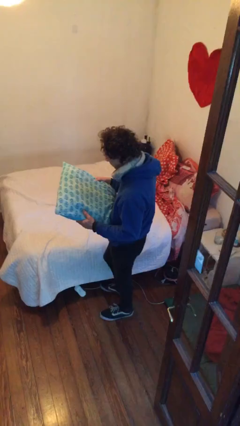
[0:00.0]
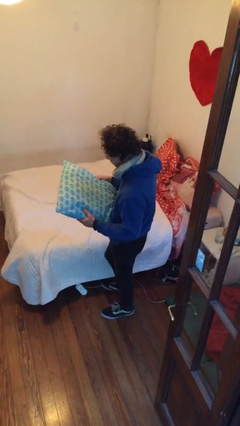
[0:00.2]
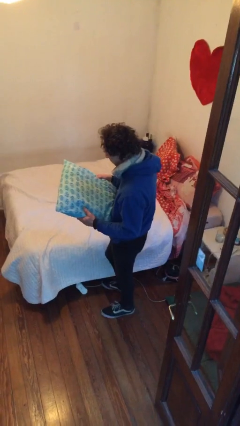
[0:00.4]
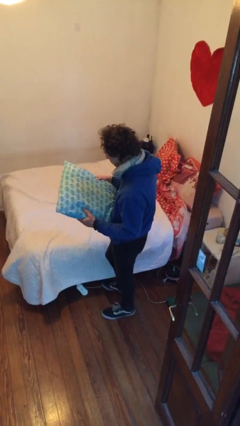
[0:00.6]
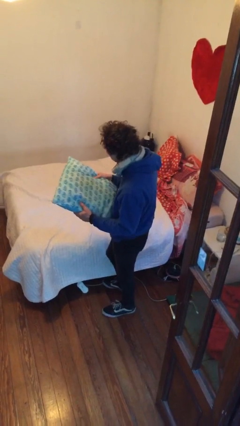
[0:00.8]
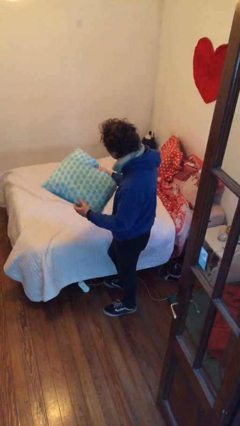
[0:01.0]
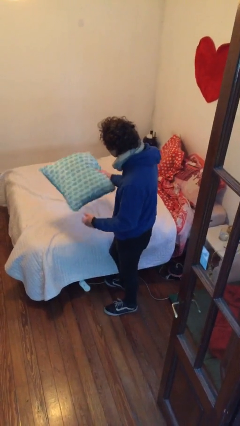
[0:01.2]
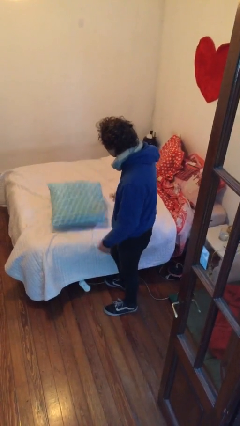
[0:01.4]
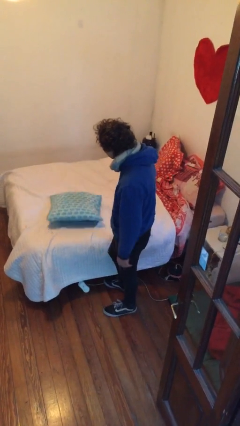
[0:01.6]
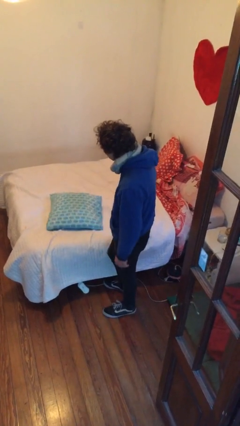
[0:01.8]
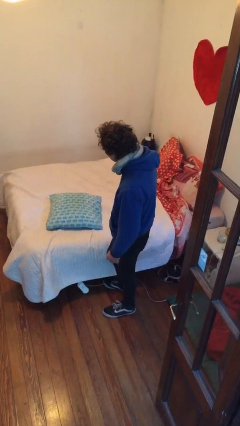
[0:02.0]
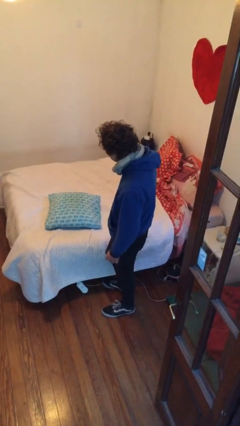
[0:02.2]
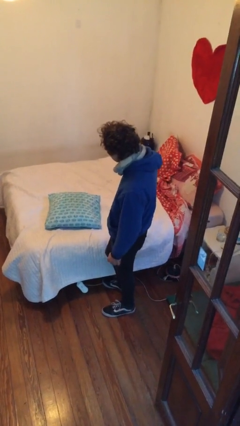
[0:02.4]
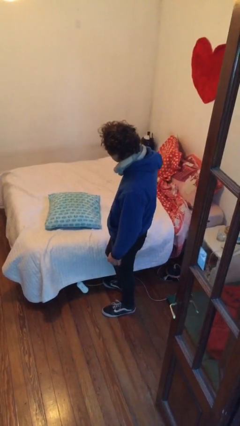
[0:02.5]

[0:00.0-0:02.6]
person puts down object on bed

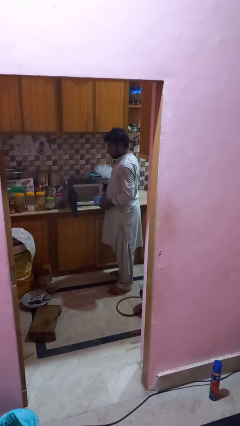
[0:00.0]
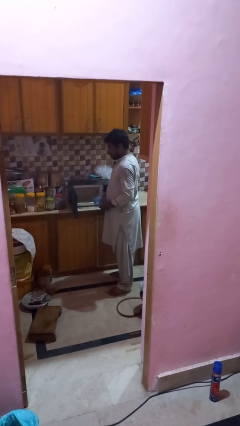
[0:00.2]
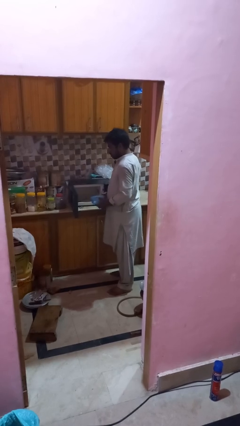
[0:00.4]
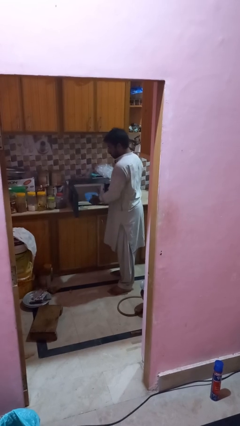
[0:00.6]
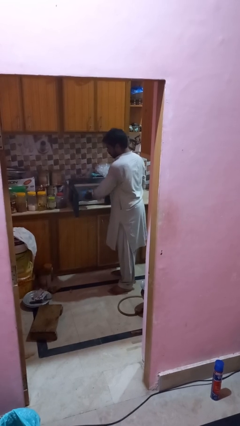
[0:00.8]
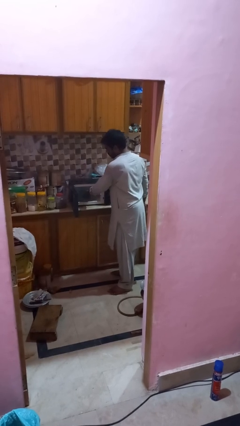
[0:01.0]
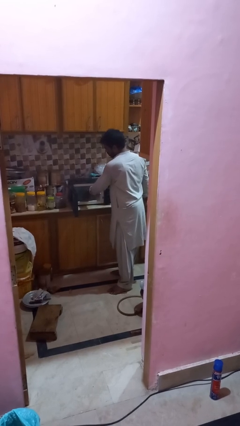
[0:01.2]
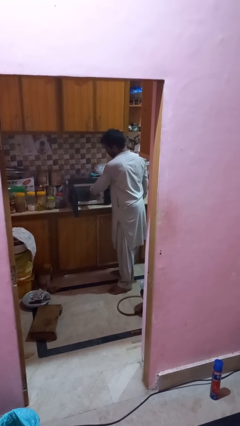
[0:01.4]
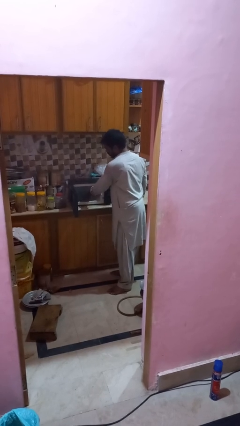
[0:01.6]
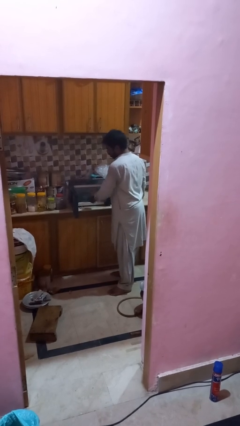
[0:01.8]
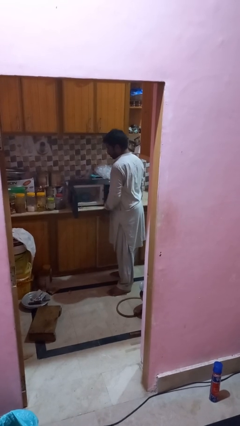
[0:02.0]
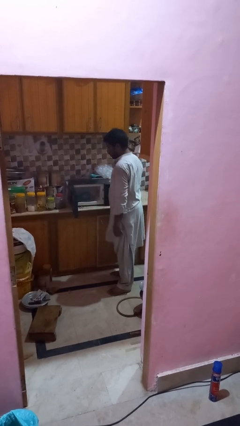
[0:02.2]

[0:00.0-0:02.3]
person puts object into microwave

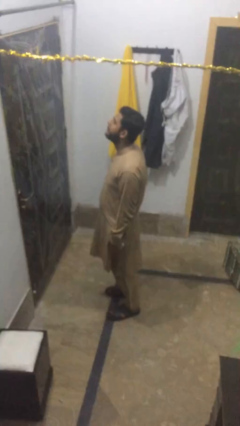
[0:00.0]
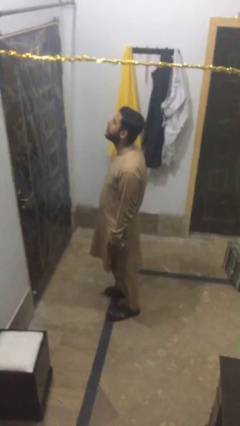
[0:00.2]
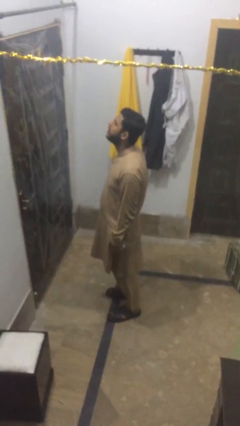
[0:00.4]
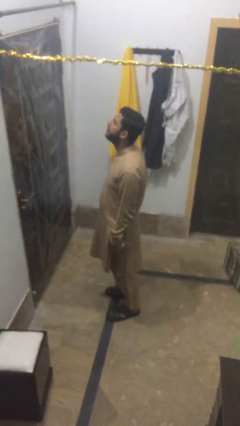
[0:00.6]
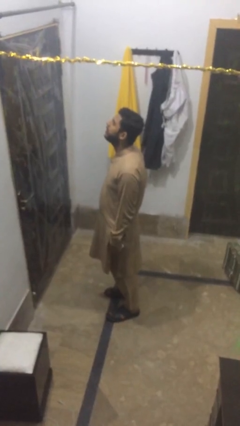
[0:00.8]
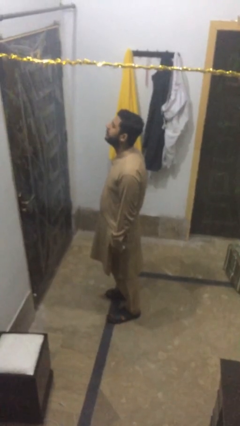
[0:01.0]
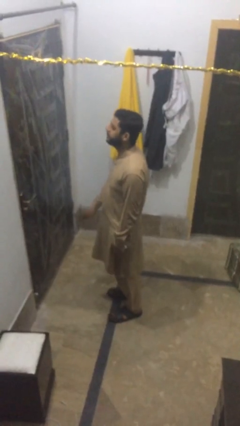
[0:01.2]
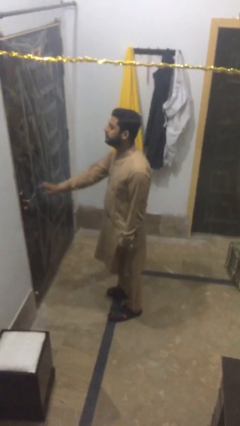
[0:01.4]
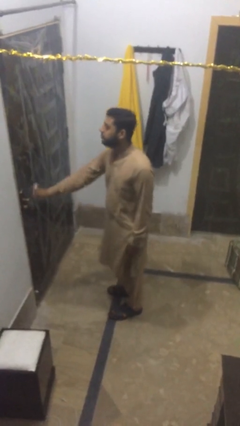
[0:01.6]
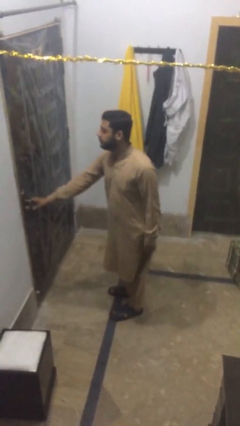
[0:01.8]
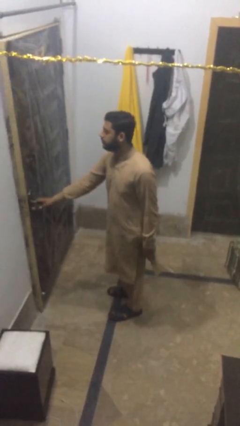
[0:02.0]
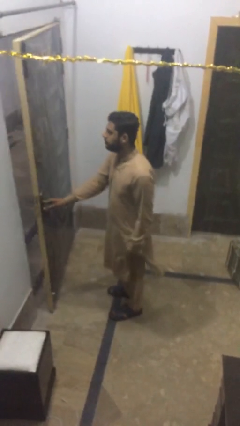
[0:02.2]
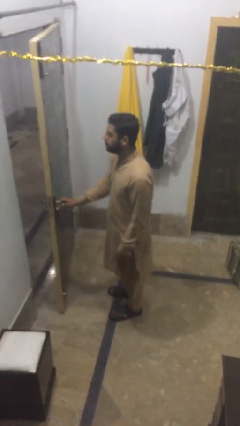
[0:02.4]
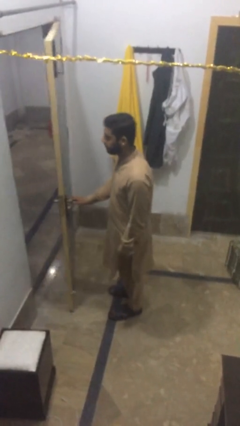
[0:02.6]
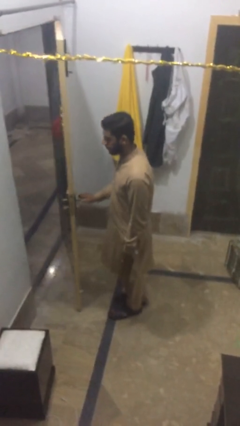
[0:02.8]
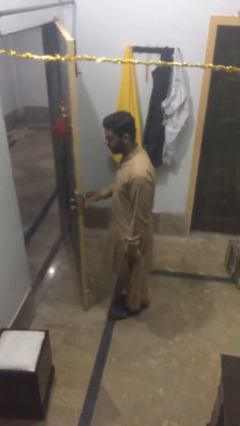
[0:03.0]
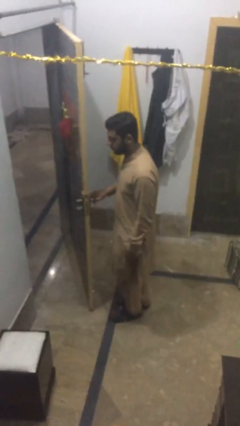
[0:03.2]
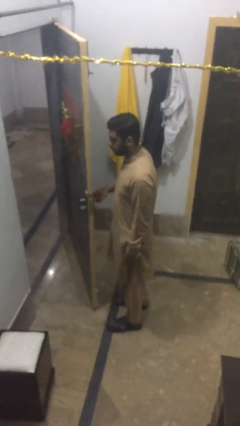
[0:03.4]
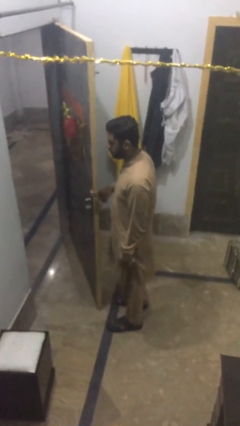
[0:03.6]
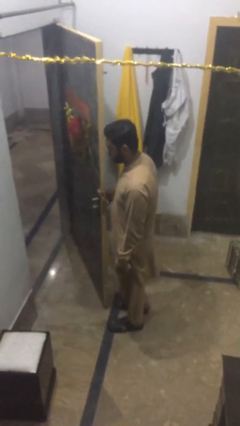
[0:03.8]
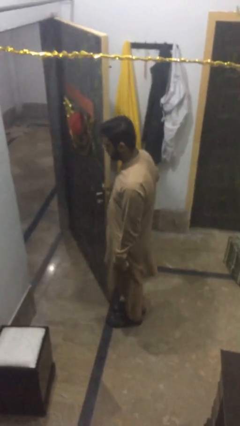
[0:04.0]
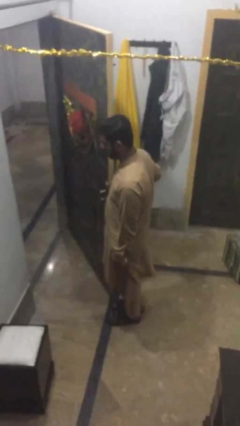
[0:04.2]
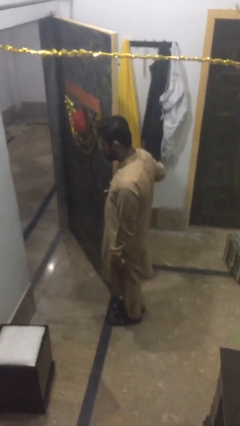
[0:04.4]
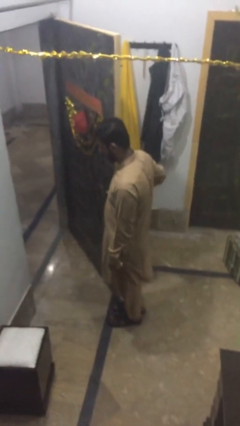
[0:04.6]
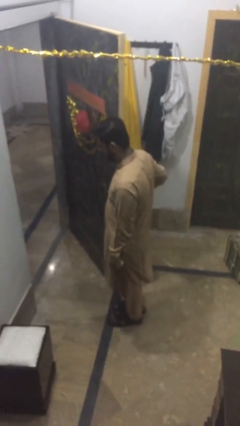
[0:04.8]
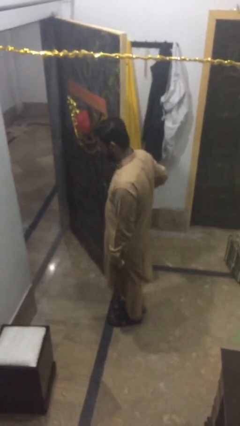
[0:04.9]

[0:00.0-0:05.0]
person opens facility door

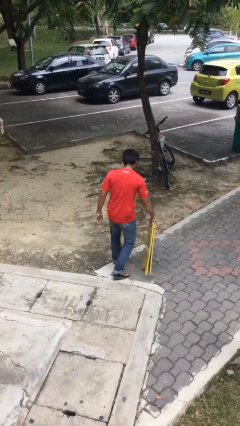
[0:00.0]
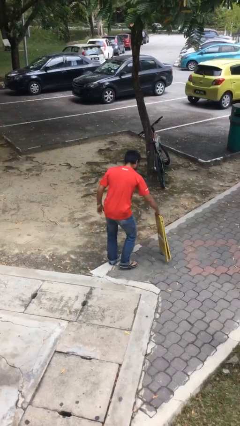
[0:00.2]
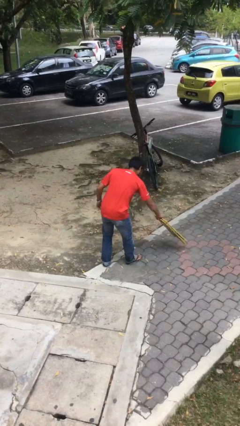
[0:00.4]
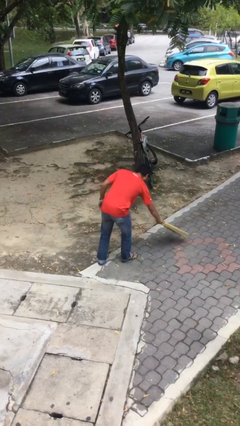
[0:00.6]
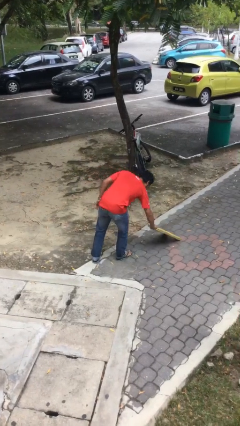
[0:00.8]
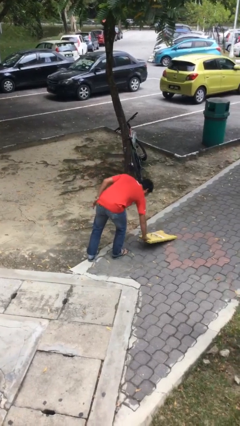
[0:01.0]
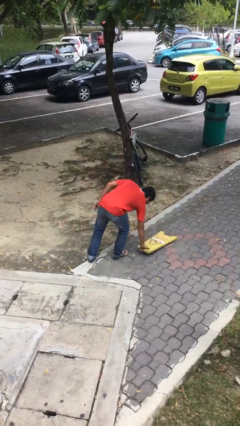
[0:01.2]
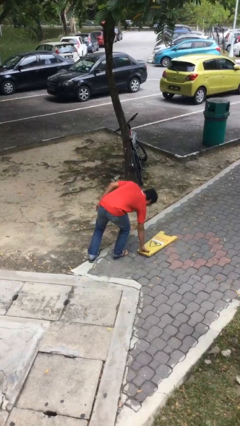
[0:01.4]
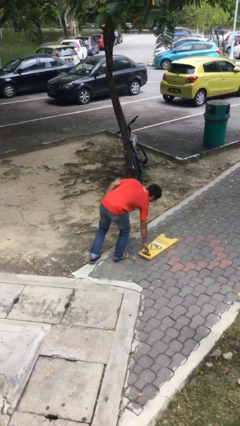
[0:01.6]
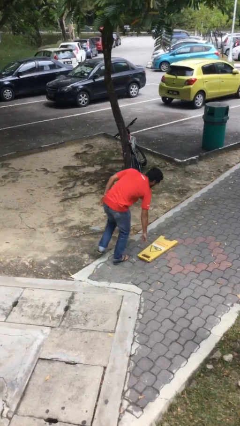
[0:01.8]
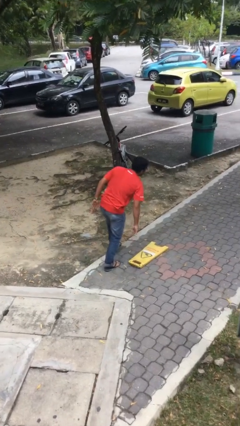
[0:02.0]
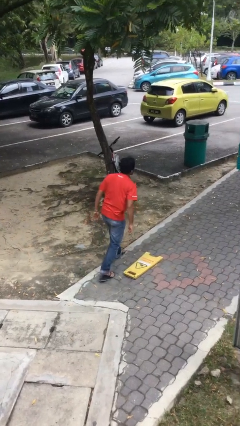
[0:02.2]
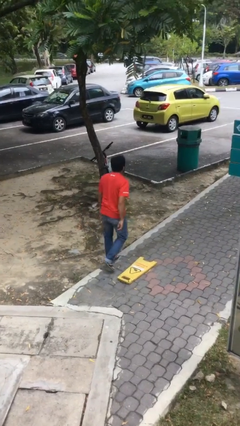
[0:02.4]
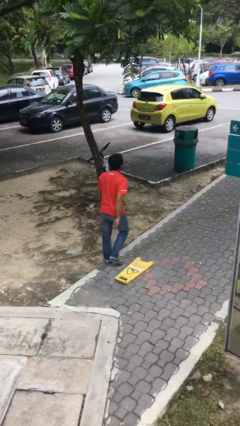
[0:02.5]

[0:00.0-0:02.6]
person puts down object on floor

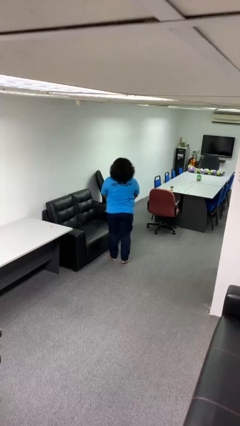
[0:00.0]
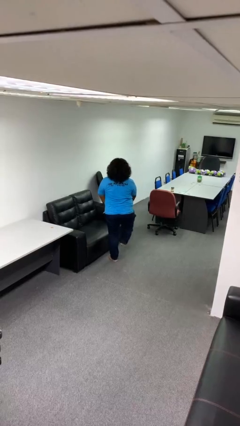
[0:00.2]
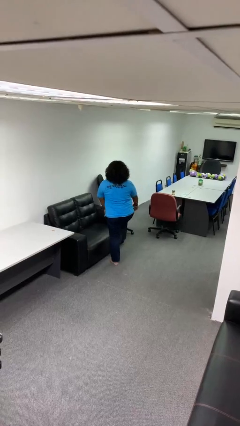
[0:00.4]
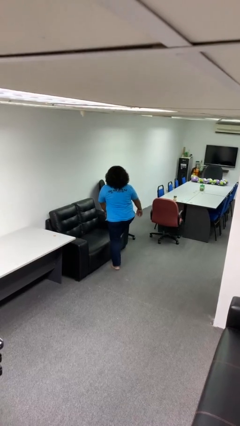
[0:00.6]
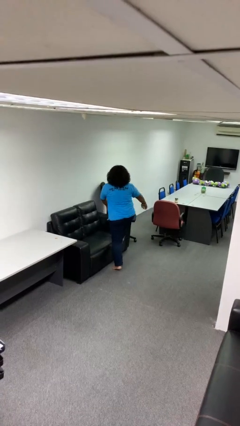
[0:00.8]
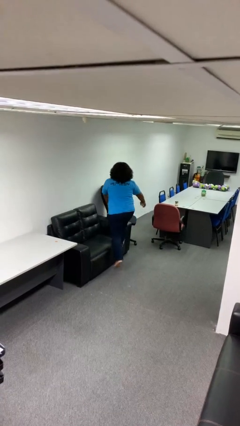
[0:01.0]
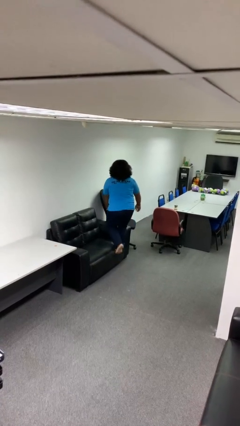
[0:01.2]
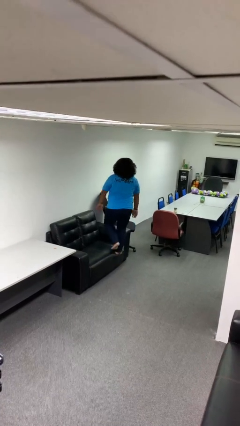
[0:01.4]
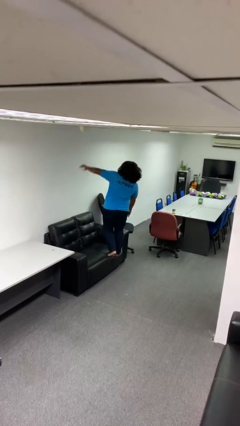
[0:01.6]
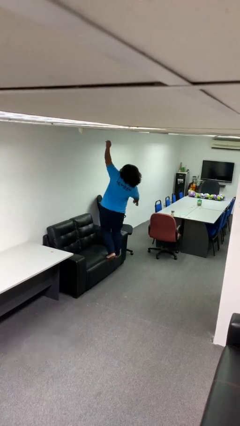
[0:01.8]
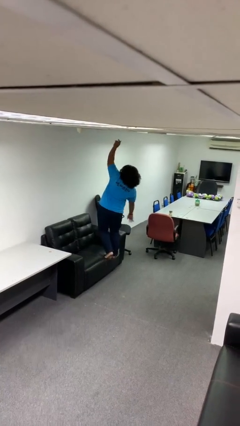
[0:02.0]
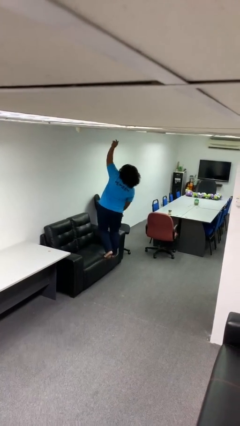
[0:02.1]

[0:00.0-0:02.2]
person climbs on couch

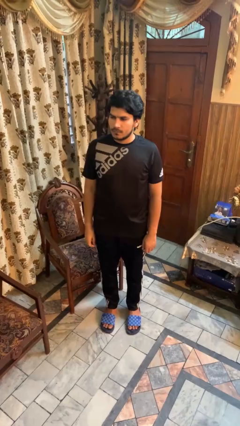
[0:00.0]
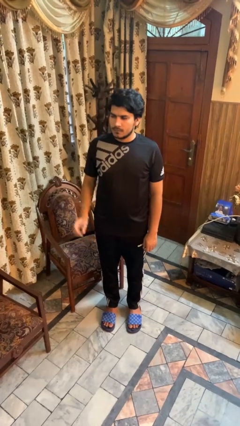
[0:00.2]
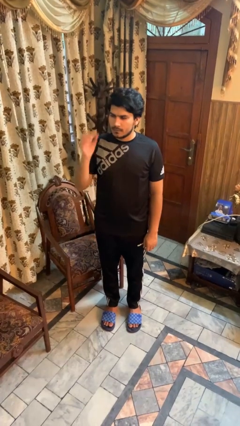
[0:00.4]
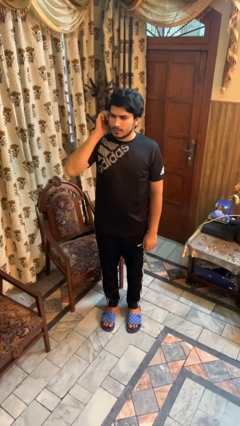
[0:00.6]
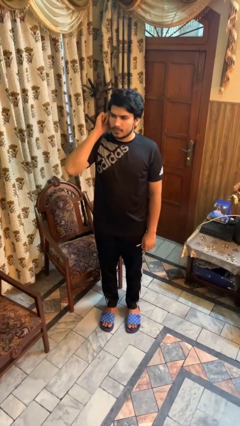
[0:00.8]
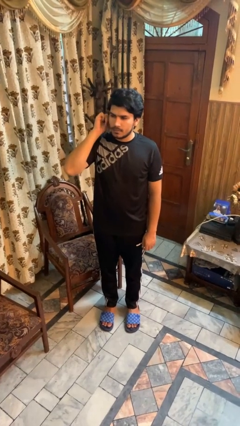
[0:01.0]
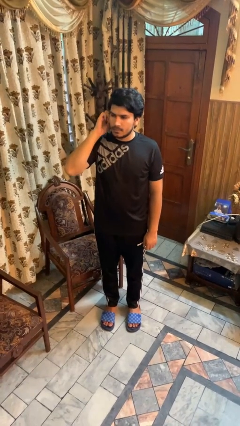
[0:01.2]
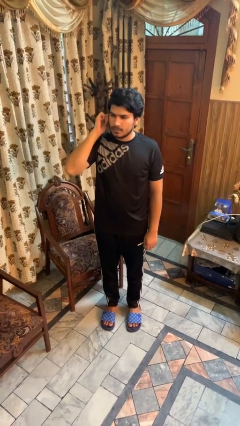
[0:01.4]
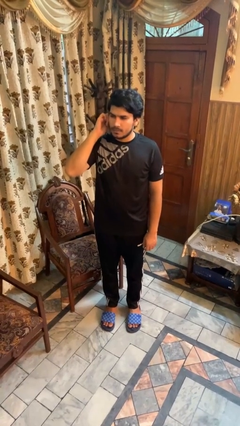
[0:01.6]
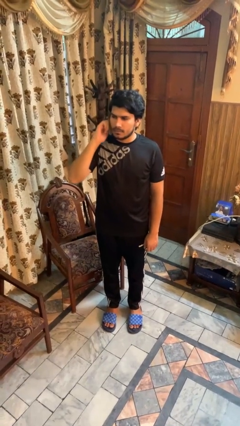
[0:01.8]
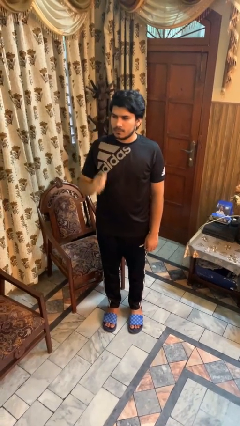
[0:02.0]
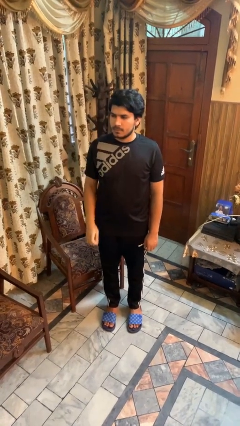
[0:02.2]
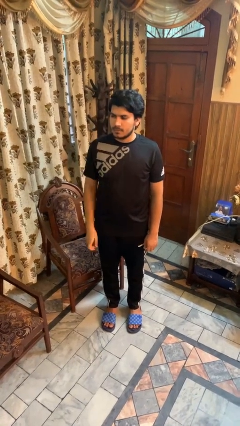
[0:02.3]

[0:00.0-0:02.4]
person touches earlobe

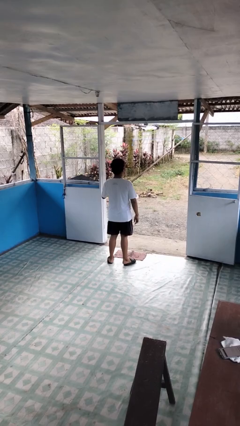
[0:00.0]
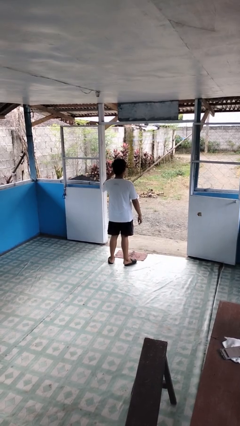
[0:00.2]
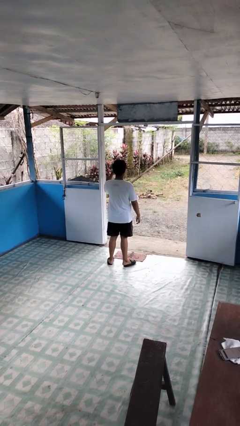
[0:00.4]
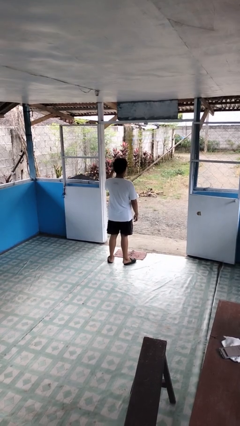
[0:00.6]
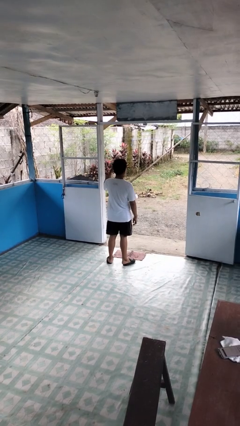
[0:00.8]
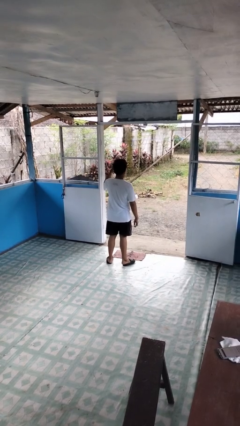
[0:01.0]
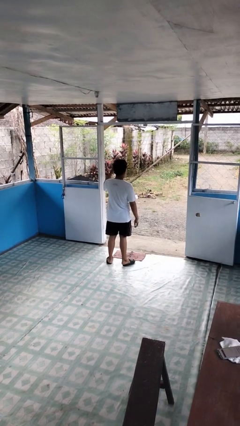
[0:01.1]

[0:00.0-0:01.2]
person gestures number one
